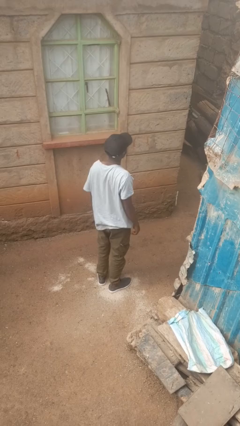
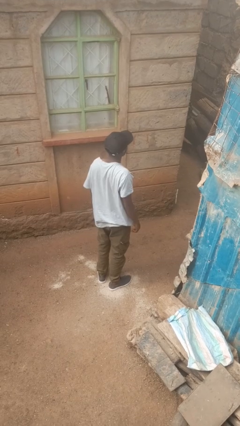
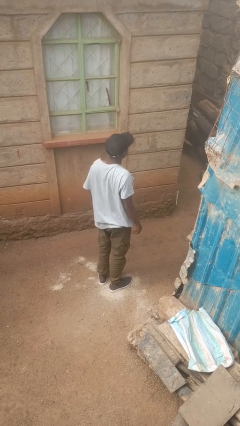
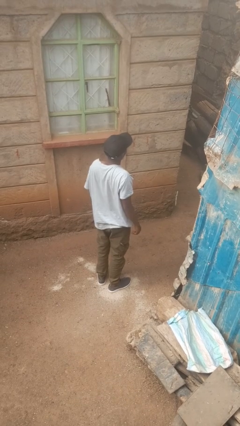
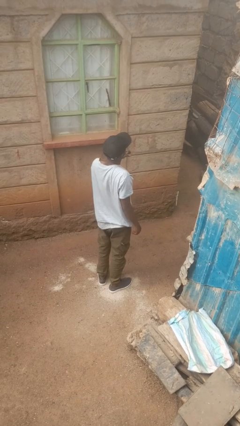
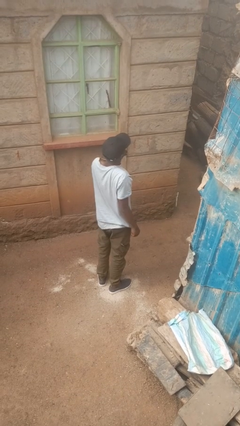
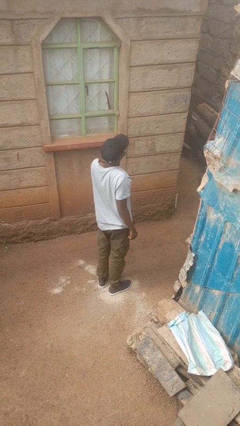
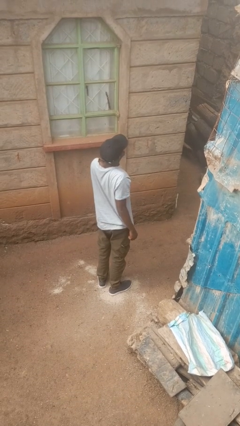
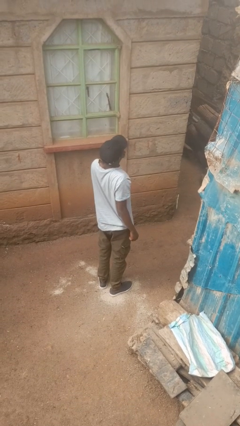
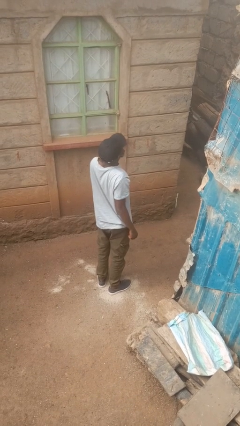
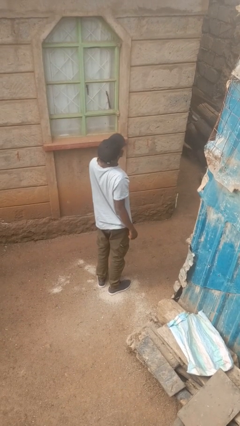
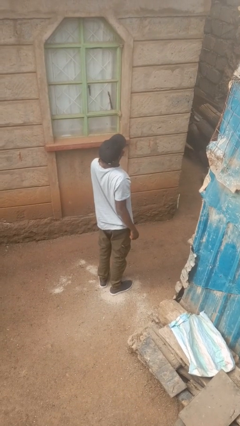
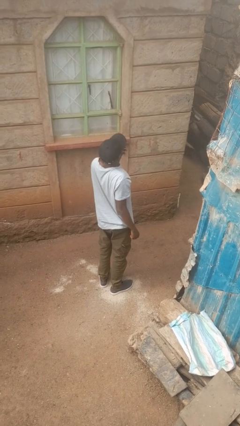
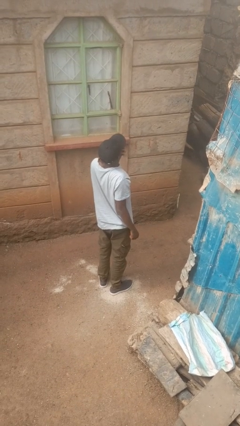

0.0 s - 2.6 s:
person yawns

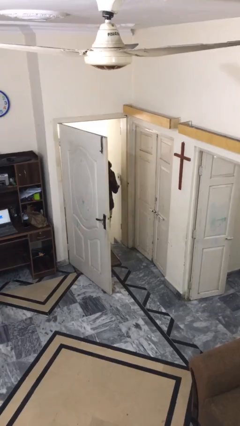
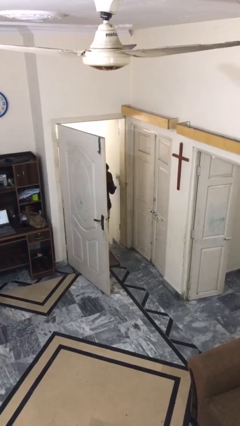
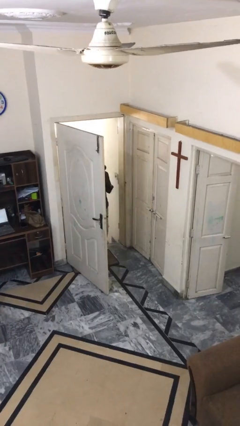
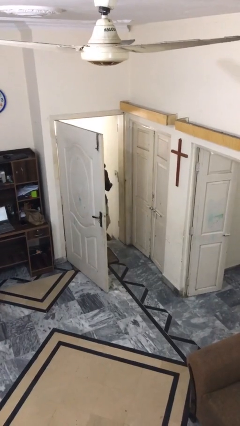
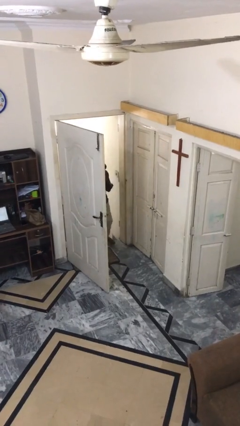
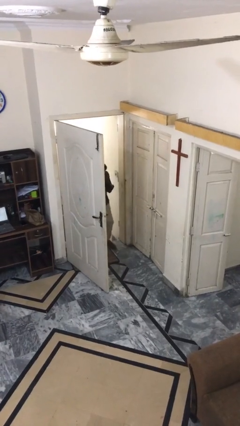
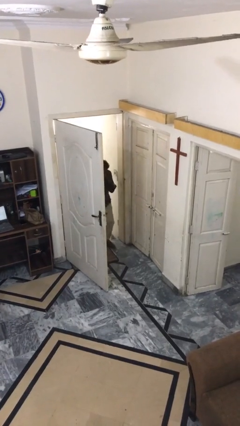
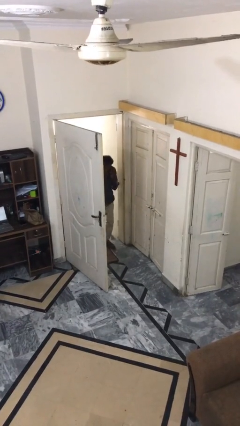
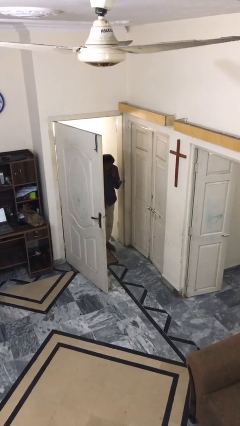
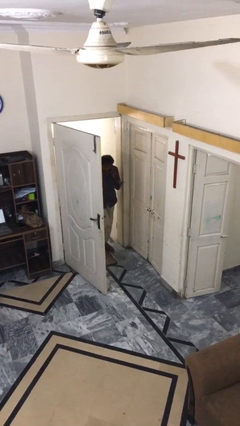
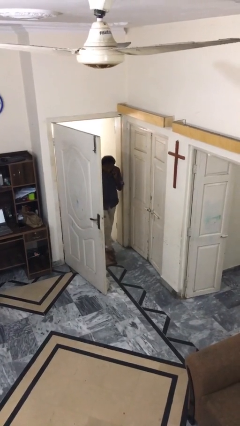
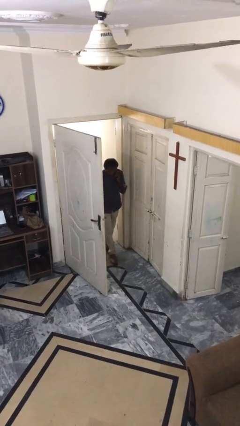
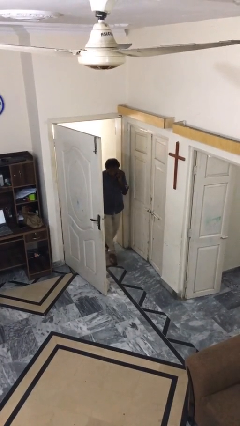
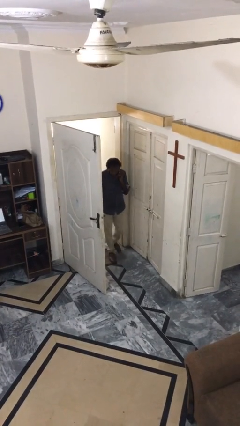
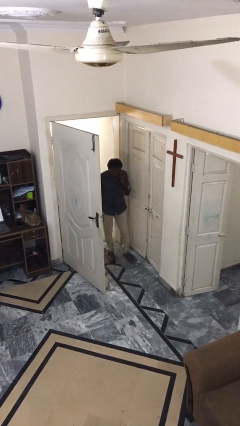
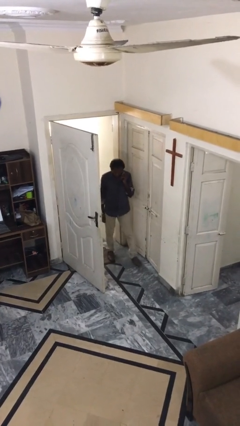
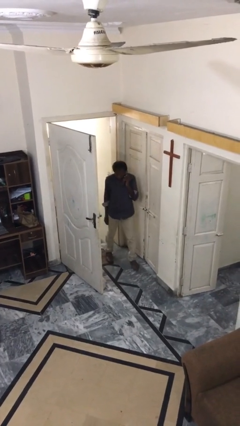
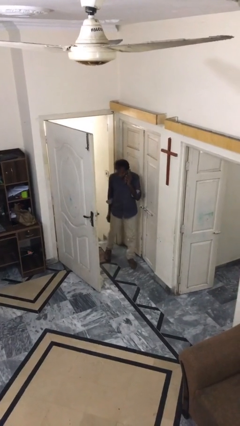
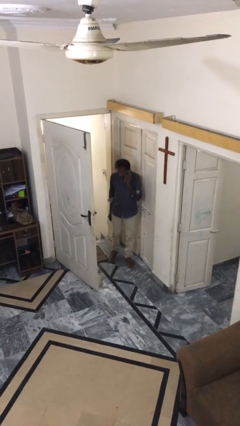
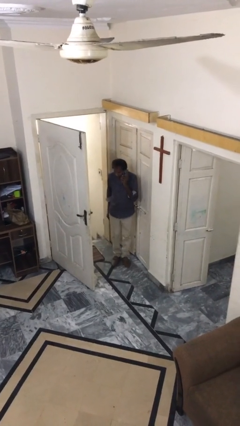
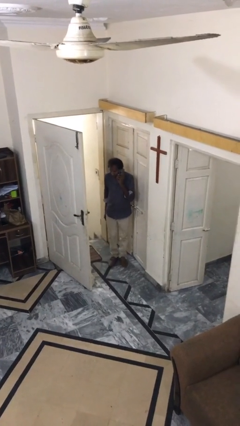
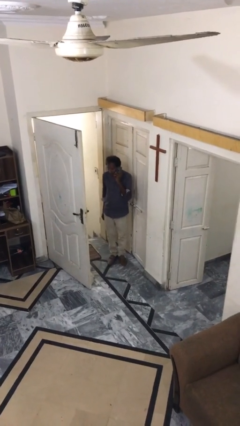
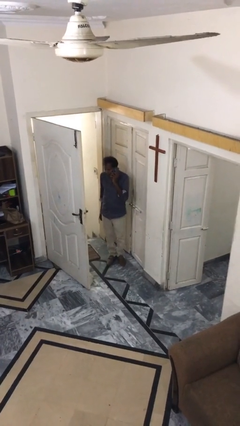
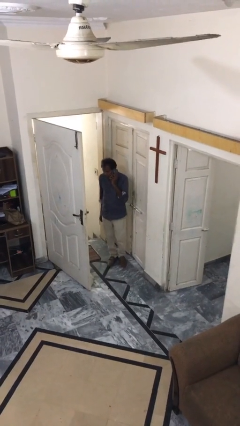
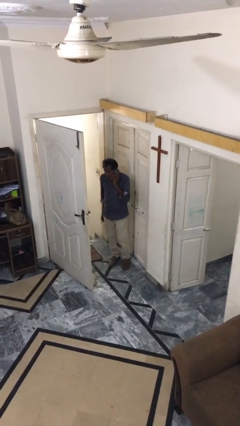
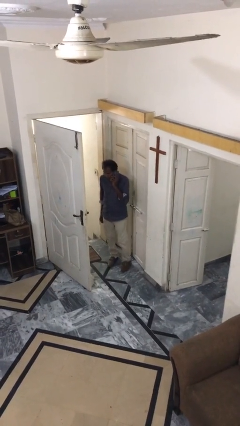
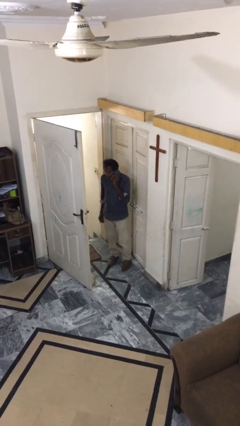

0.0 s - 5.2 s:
person enters scene through structure

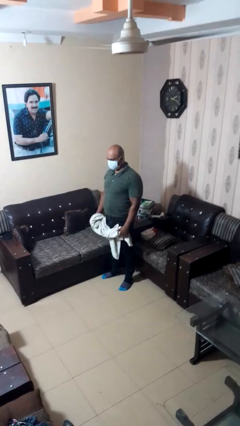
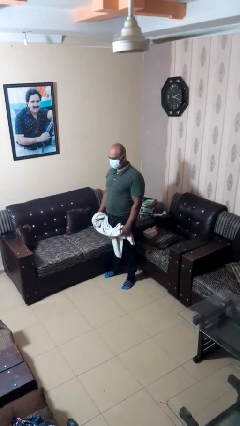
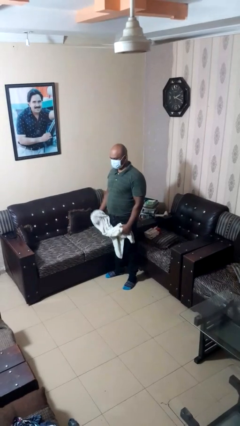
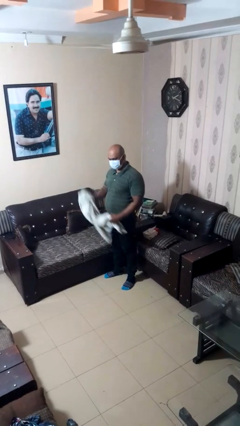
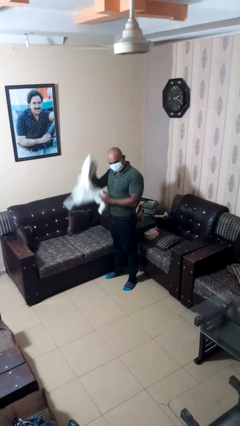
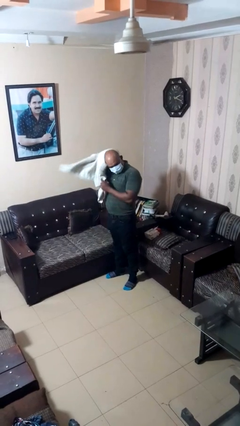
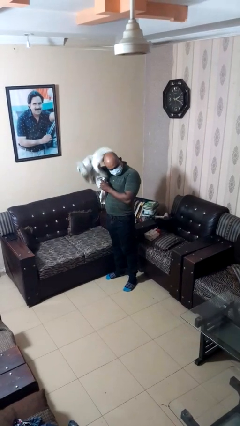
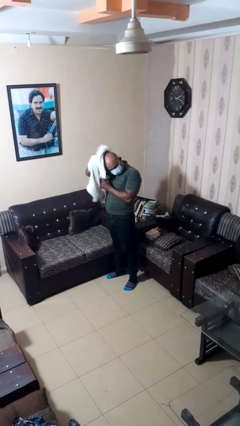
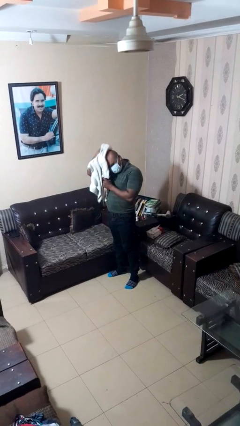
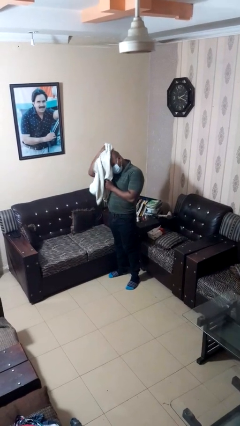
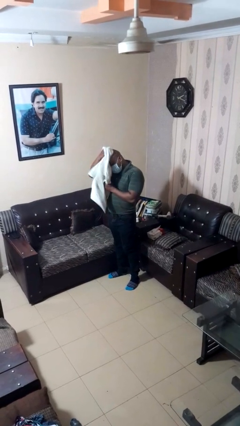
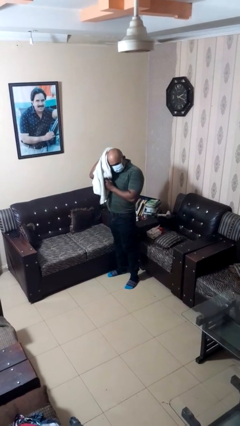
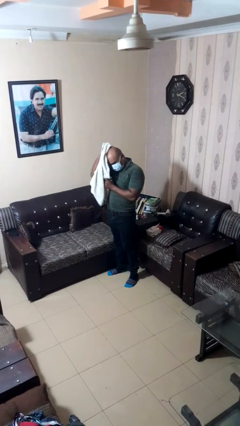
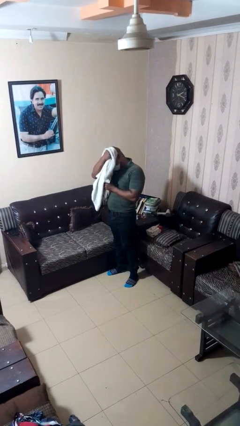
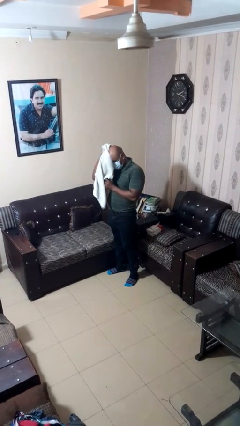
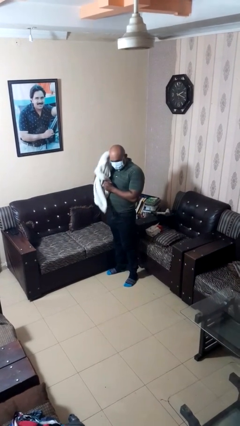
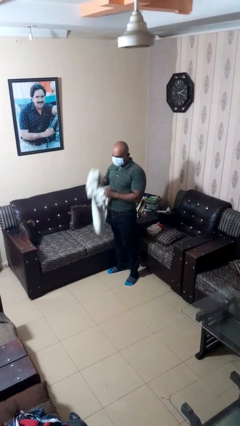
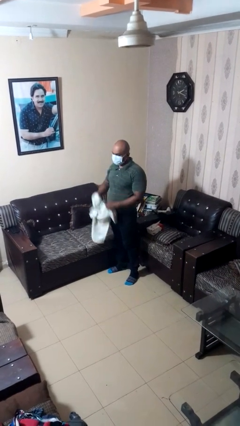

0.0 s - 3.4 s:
person dries hair with towel

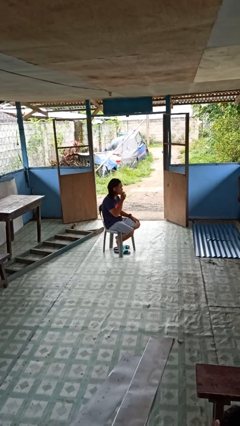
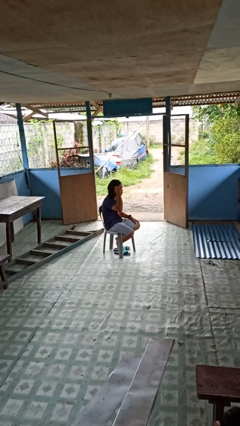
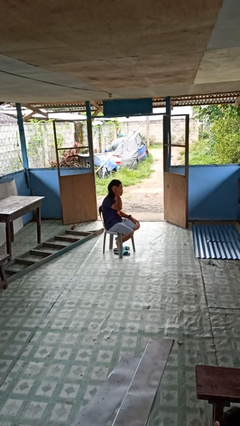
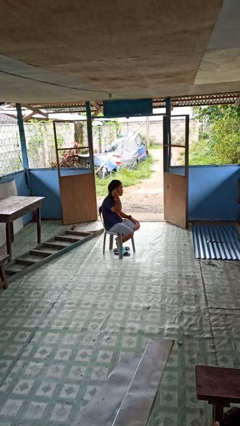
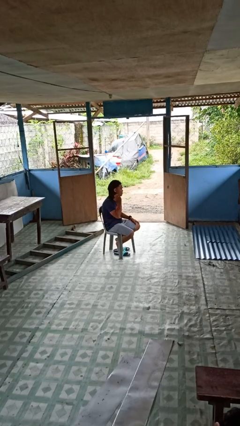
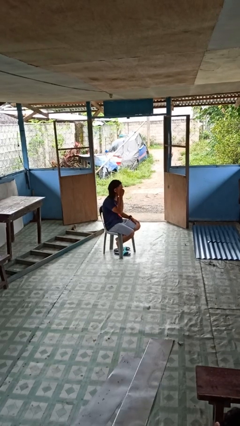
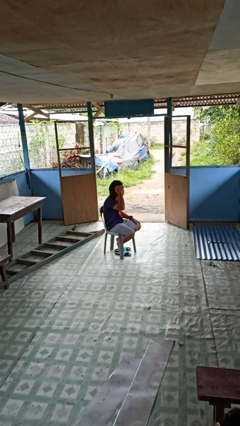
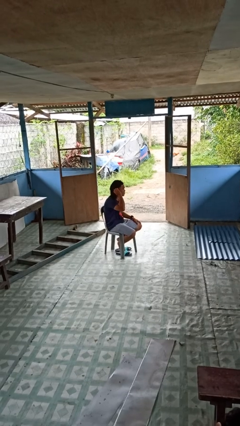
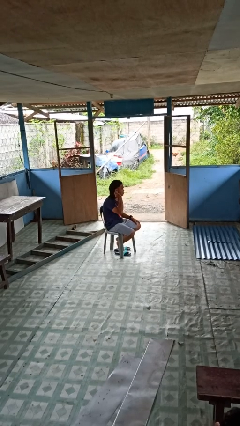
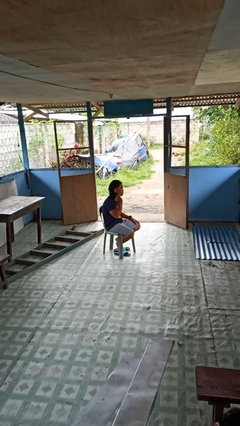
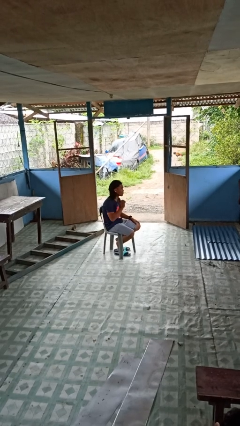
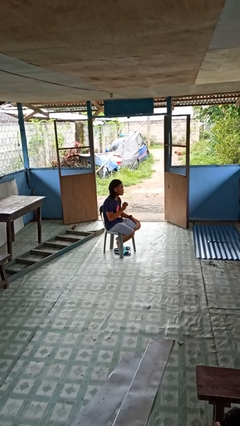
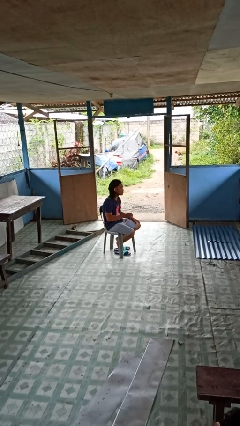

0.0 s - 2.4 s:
person strokes hair

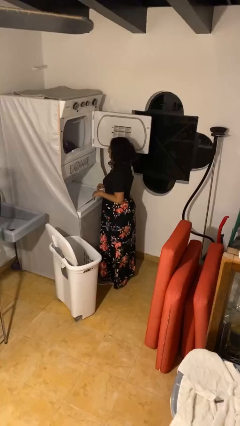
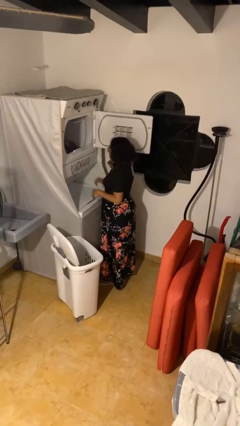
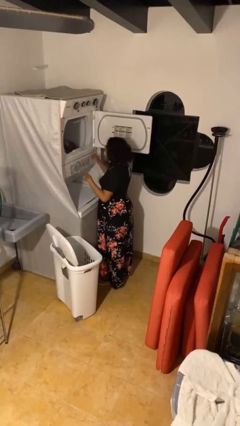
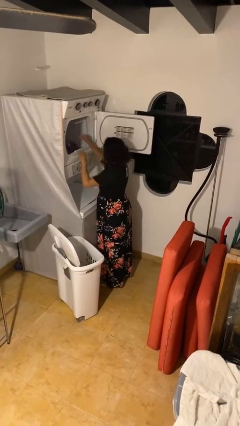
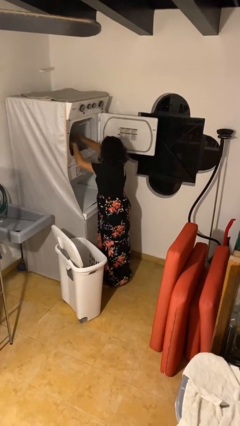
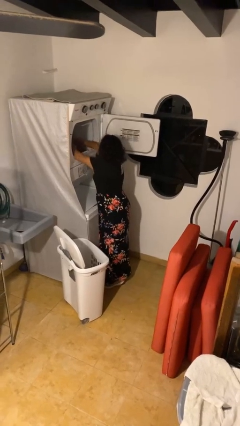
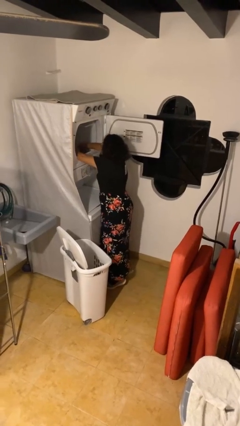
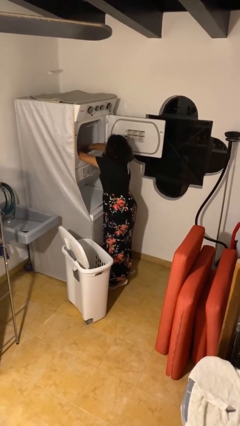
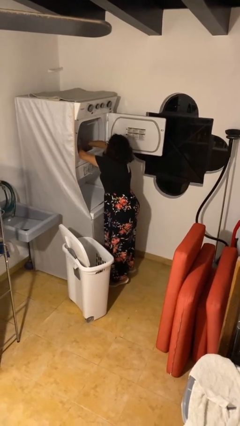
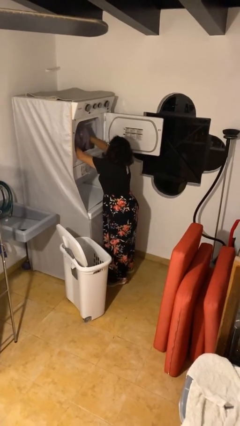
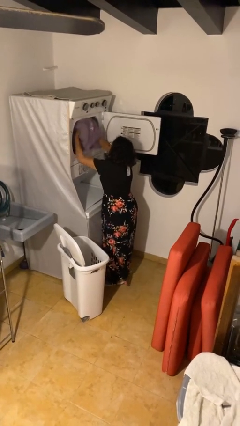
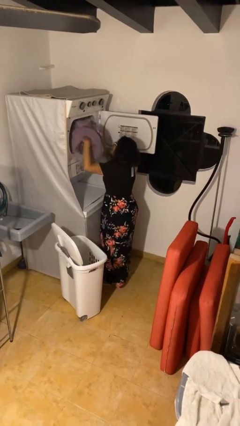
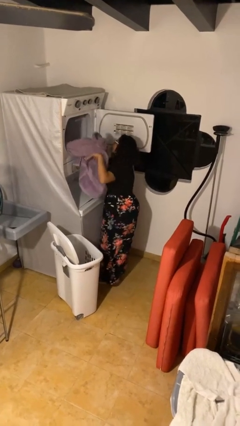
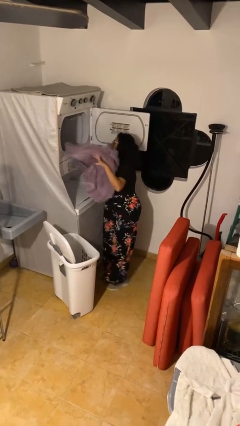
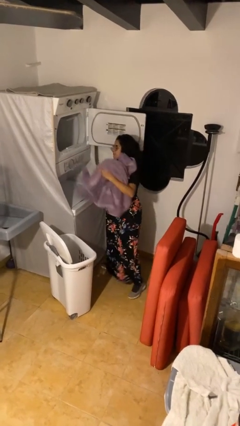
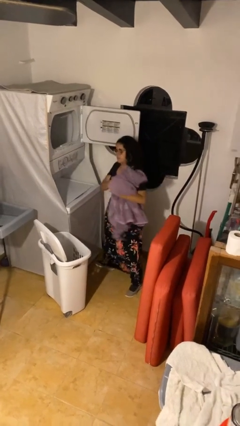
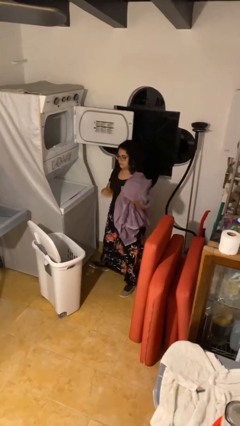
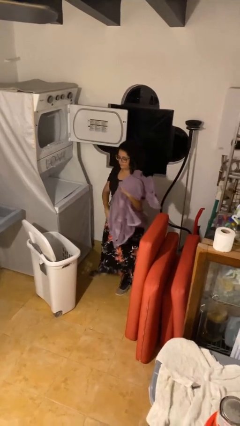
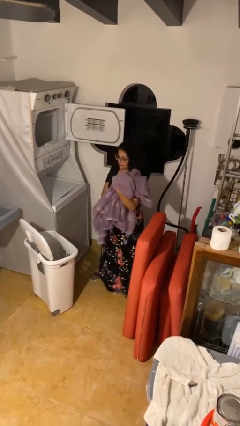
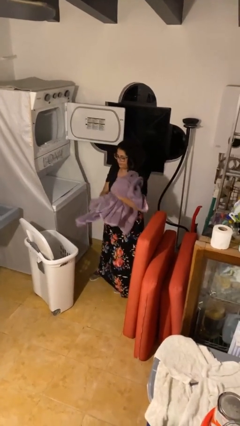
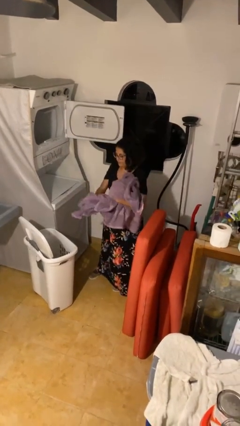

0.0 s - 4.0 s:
person unloads dryer
